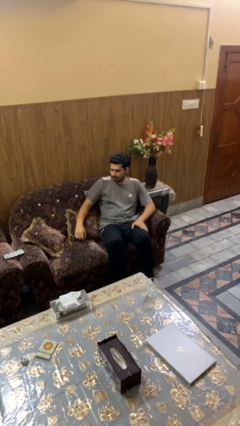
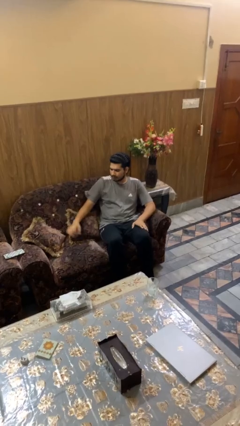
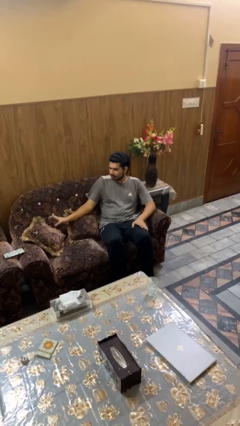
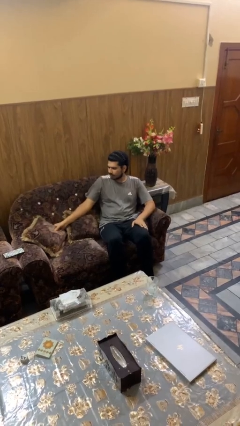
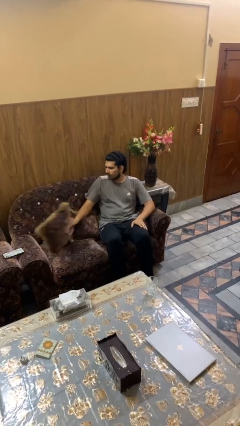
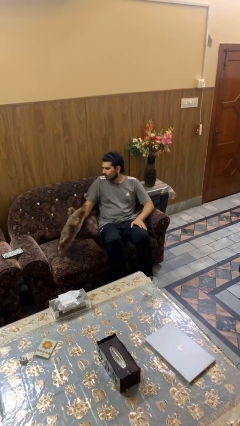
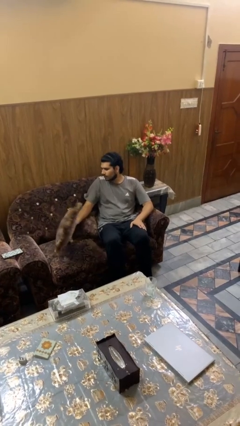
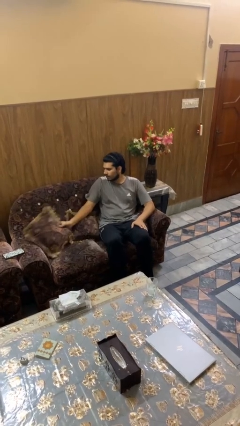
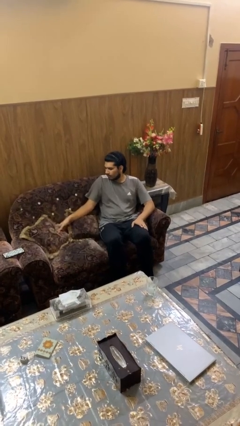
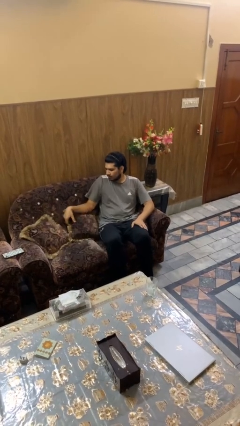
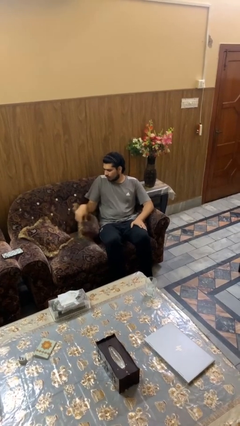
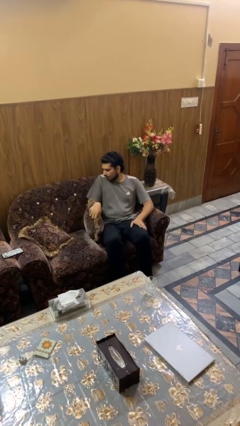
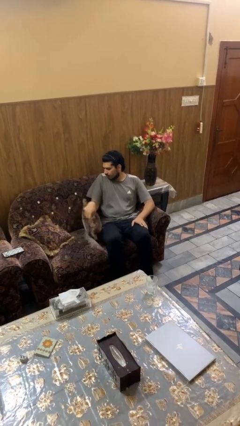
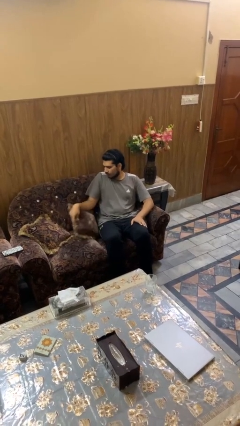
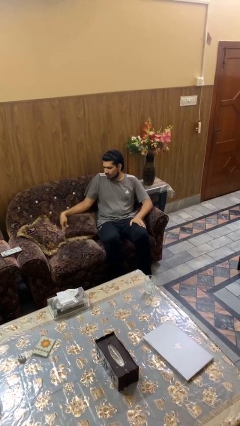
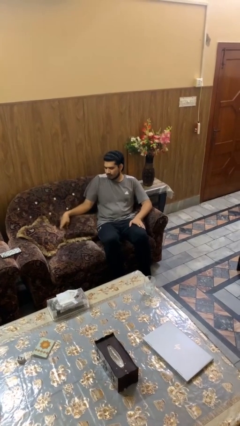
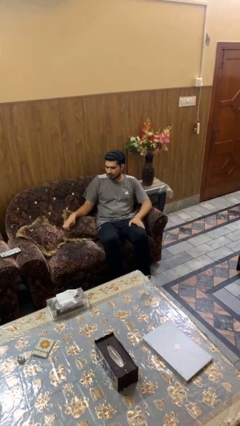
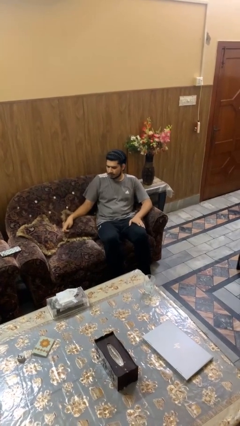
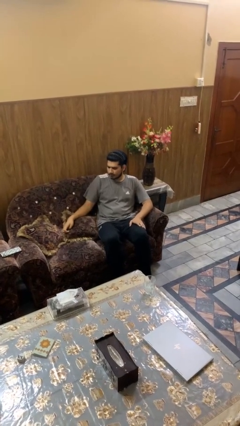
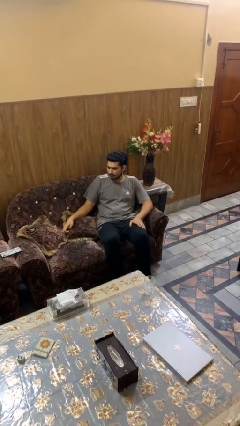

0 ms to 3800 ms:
person searches in couch

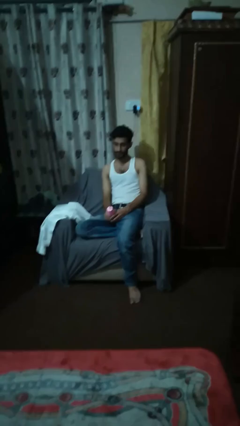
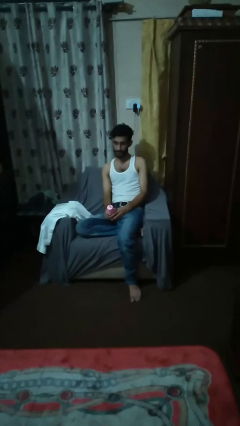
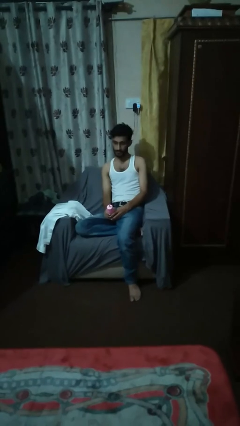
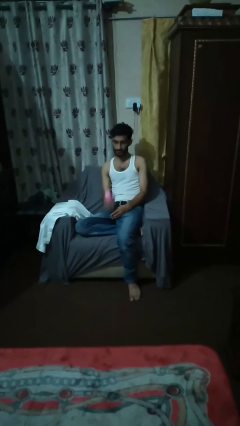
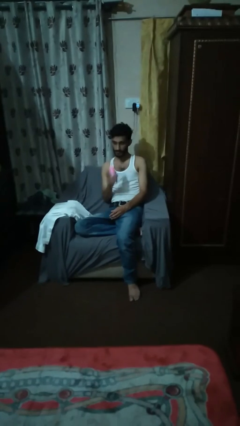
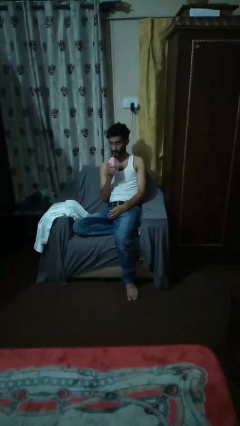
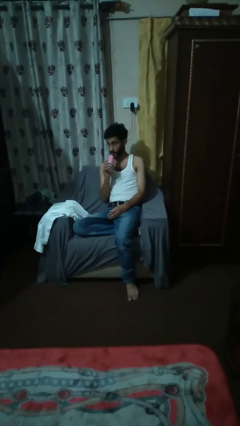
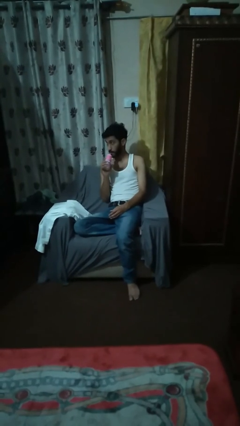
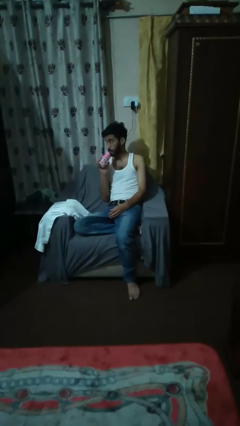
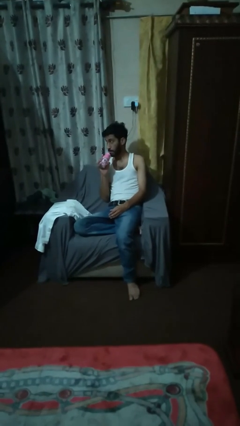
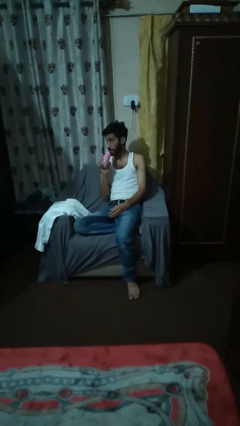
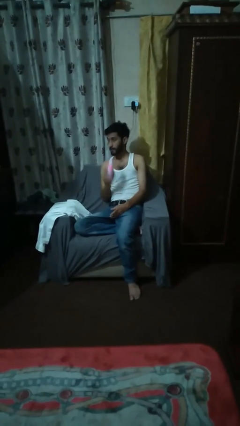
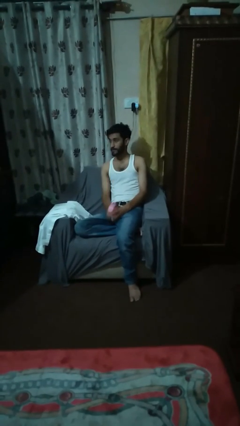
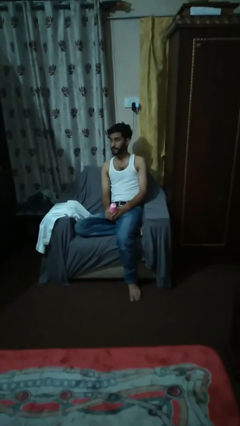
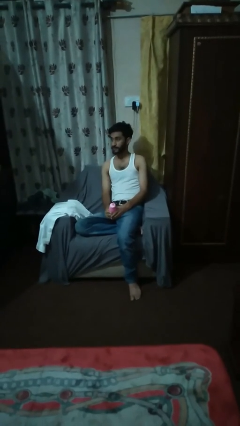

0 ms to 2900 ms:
person drinks from straw

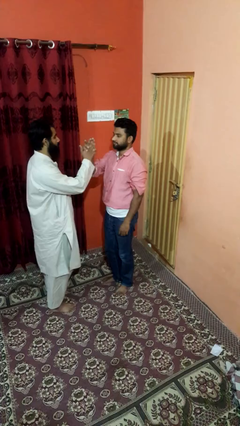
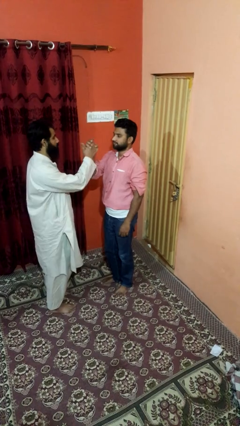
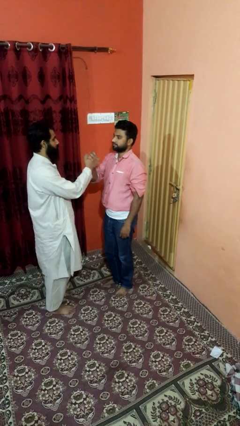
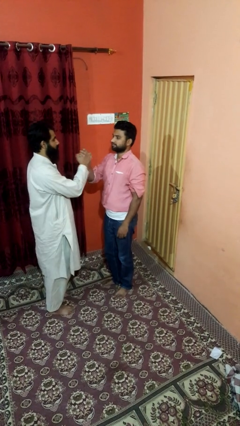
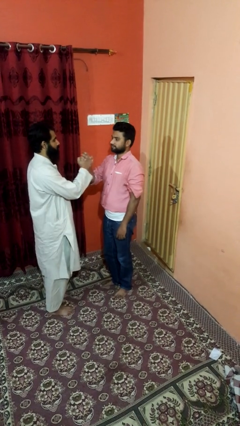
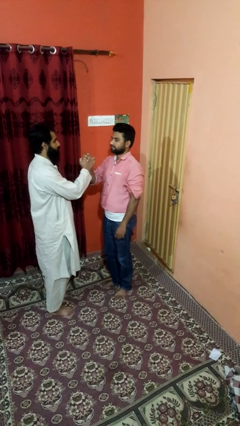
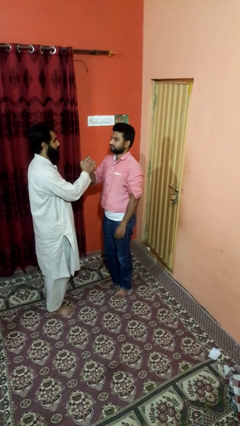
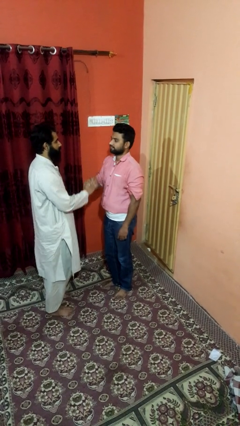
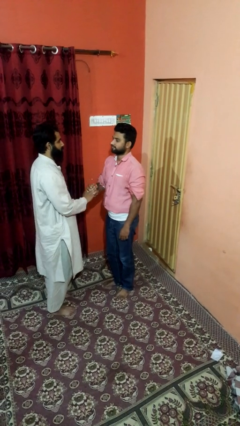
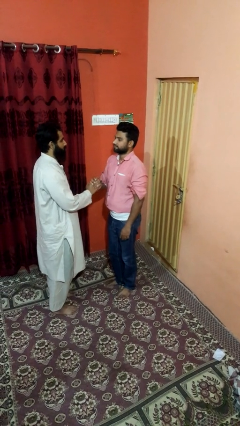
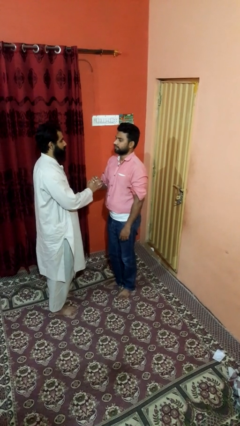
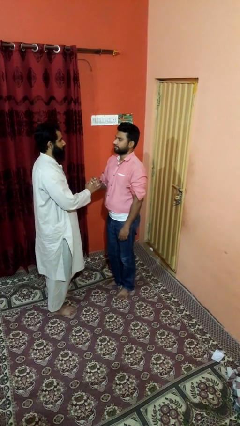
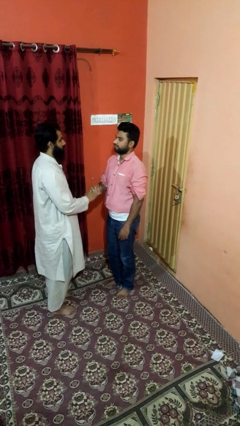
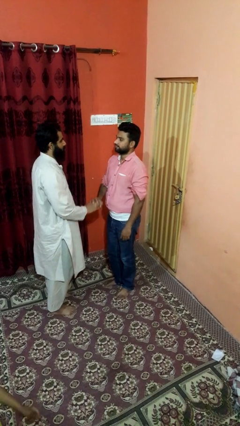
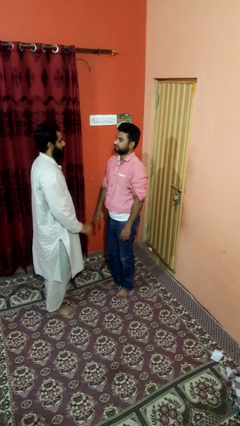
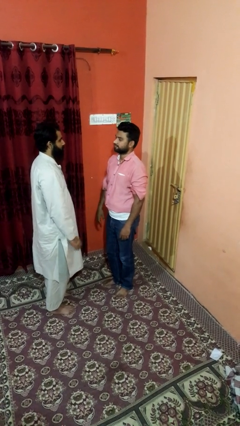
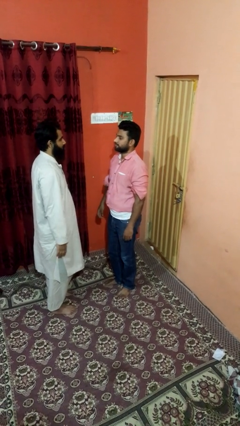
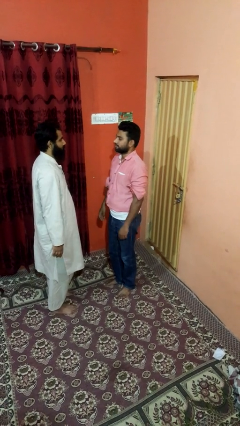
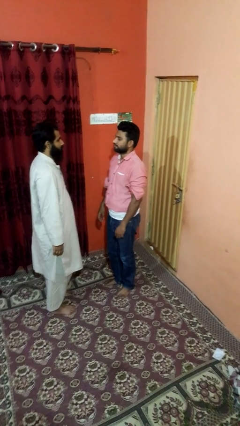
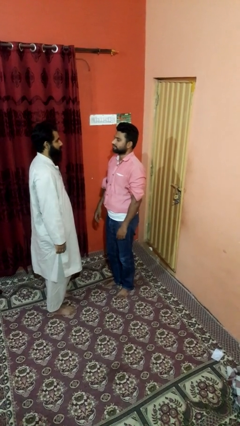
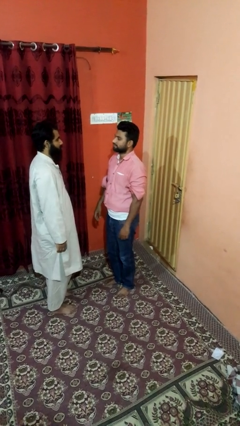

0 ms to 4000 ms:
person highfives hand

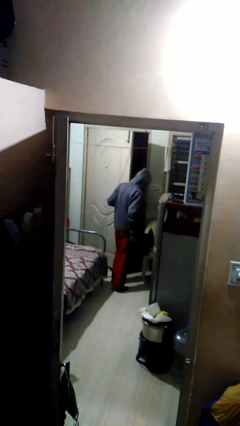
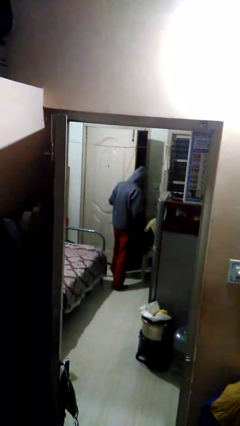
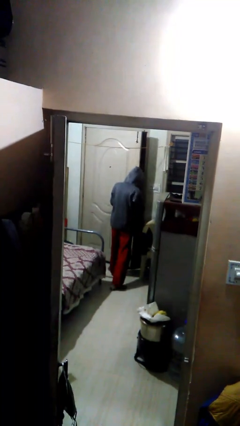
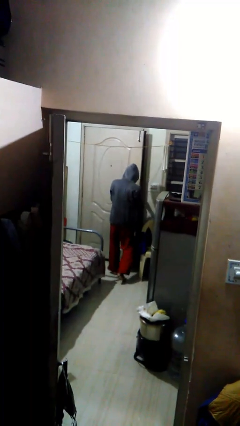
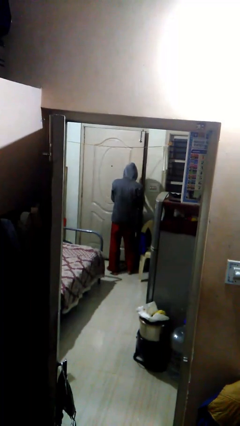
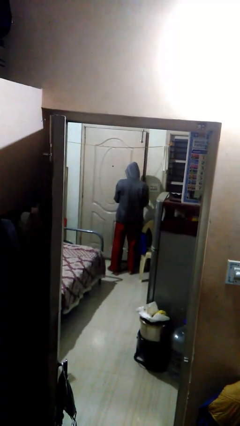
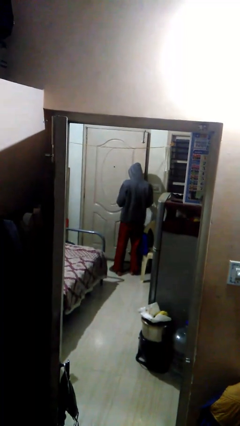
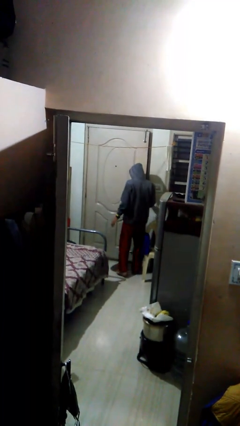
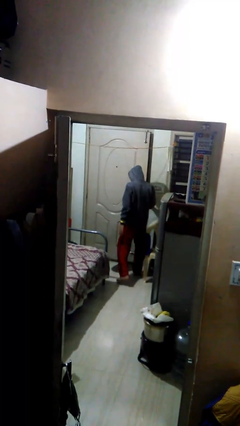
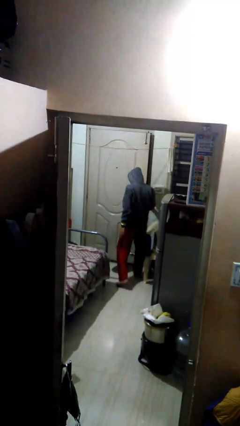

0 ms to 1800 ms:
person closes facility door

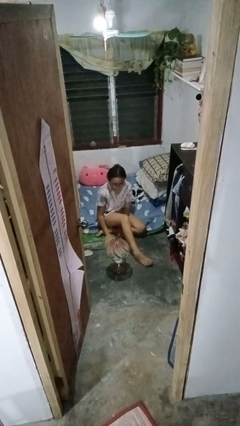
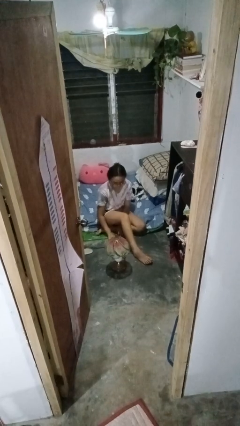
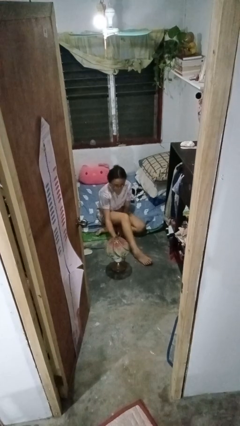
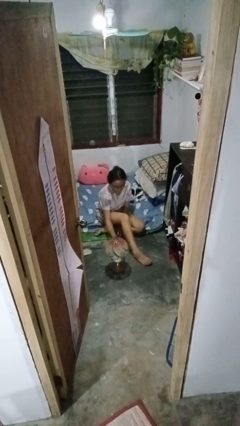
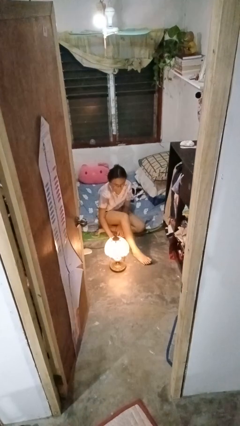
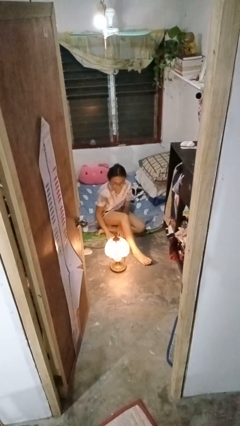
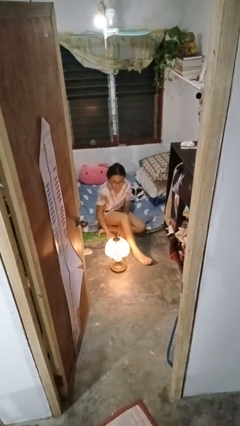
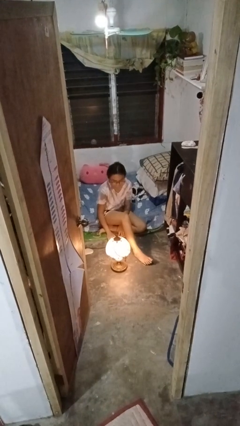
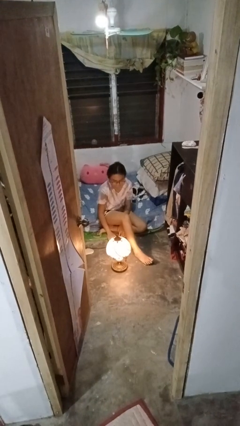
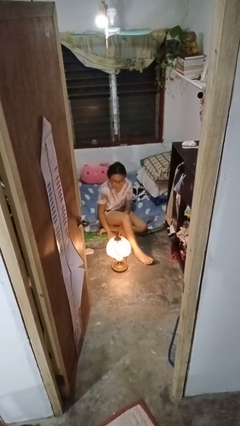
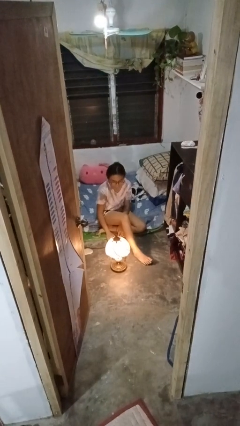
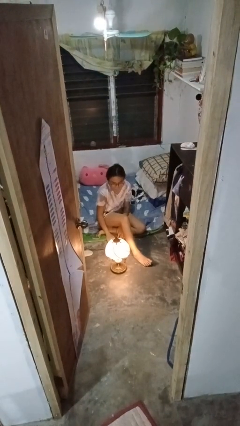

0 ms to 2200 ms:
person turns on lamp

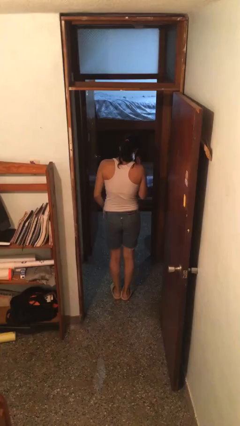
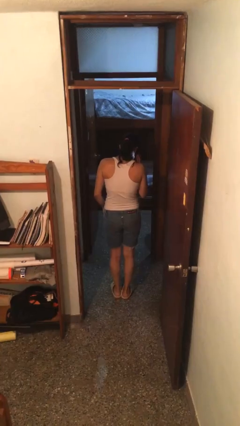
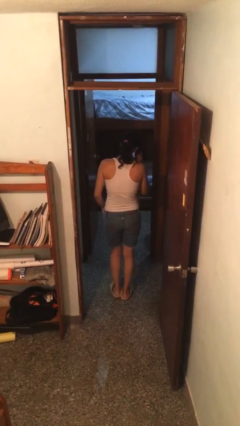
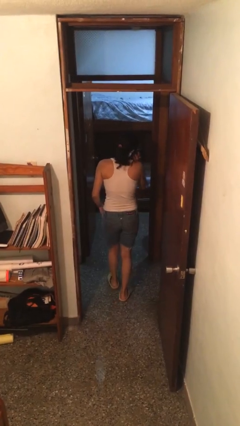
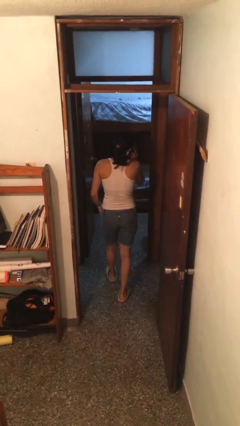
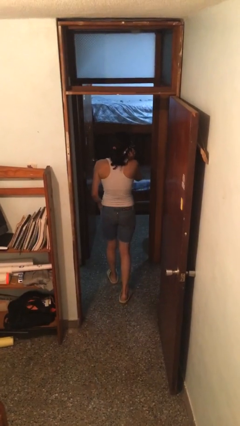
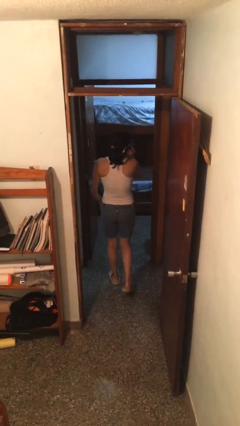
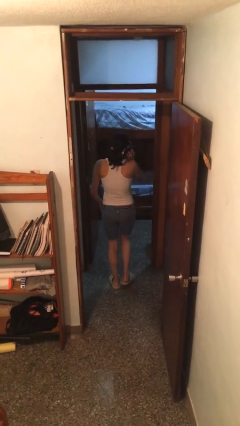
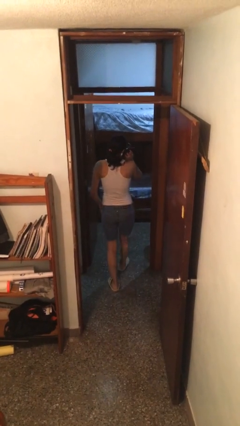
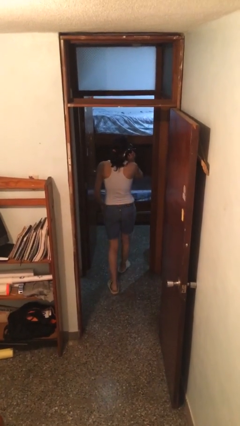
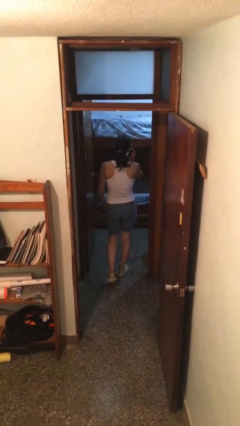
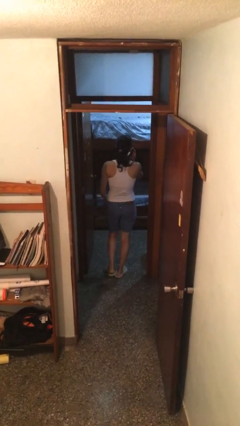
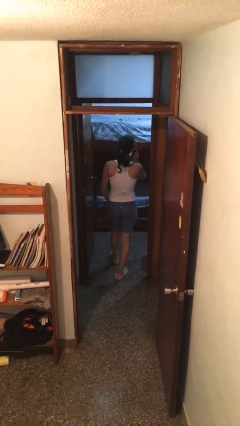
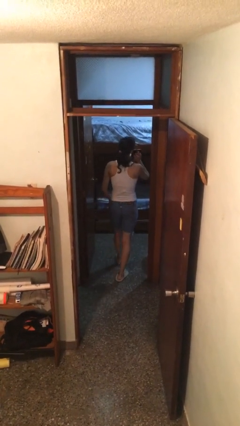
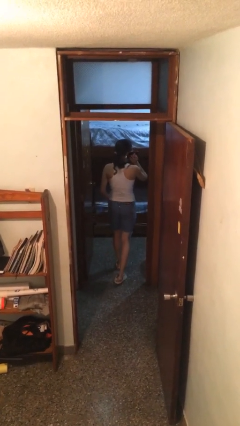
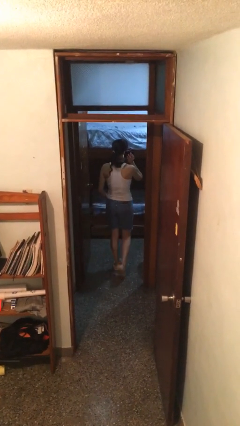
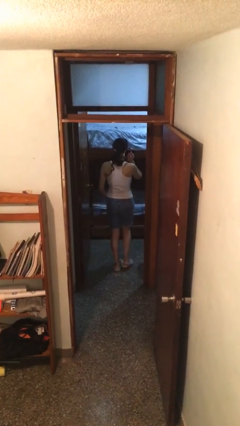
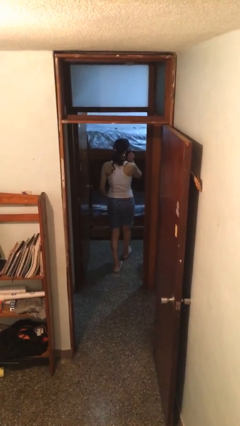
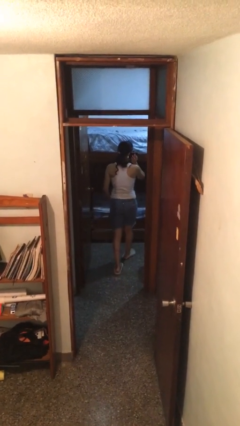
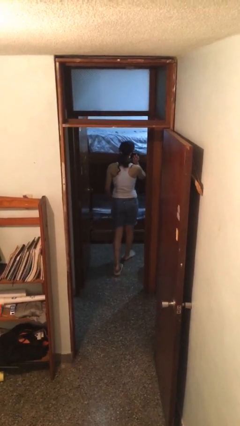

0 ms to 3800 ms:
person exits scene through structure
